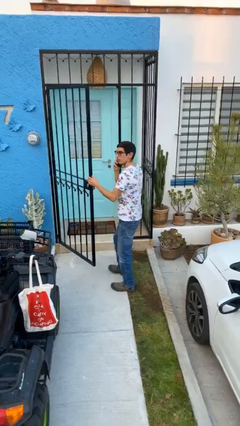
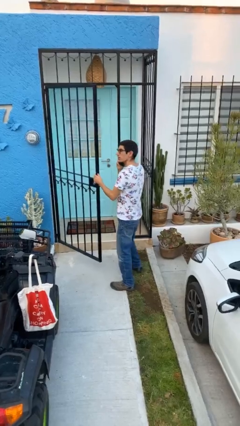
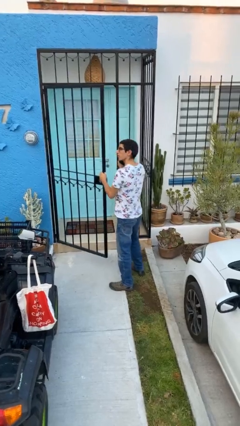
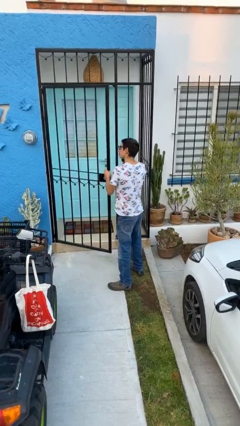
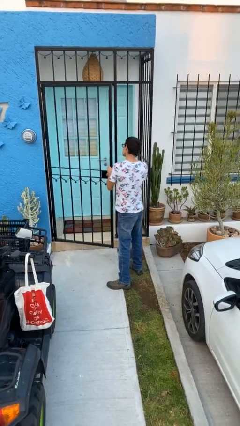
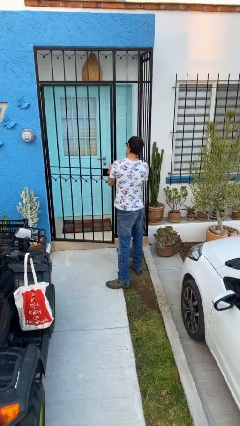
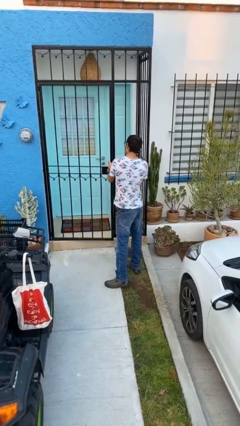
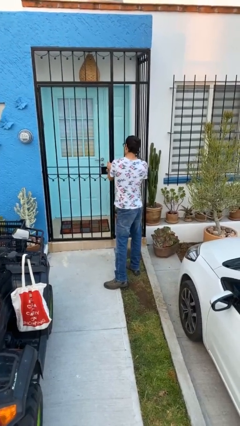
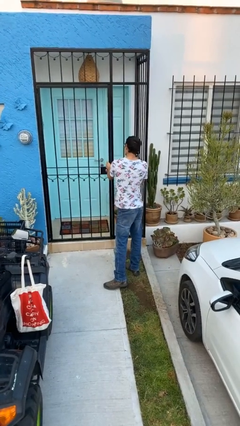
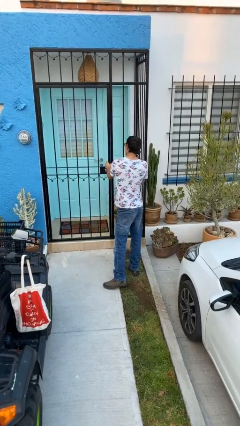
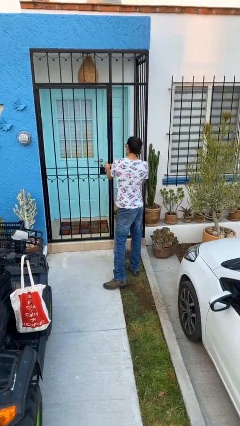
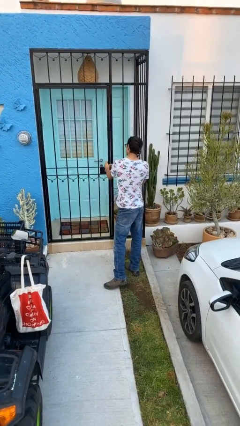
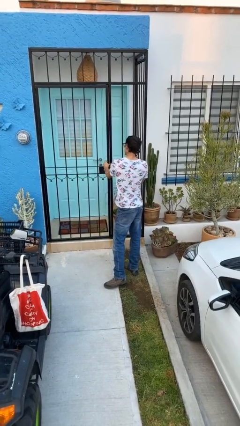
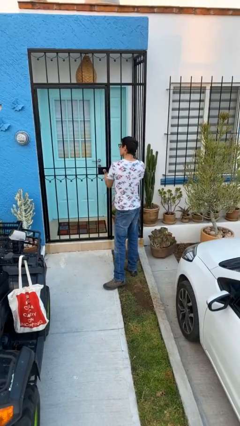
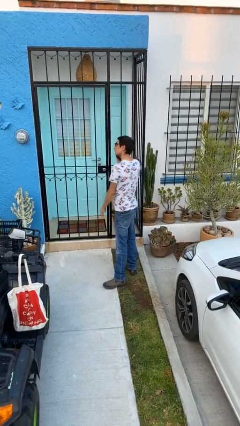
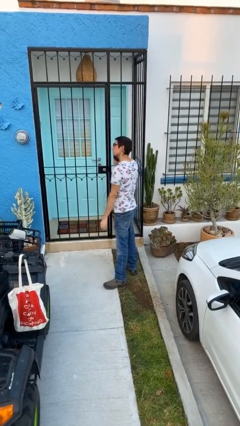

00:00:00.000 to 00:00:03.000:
person closes facility door

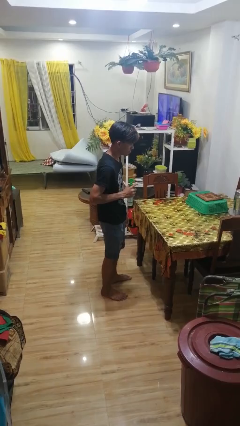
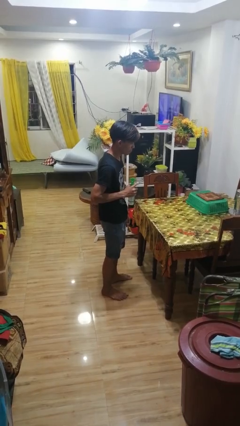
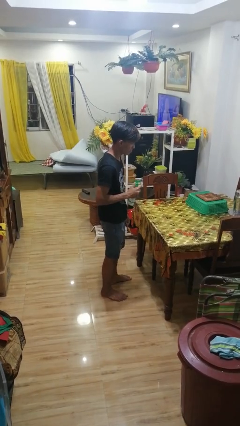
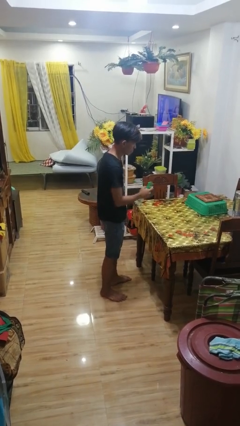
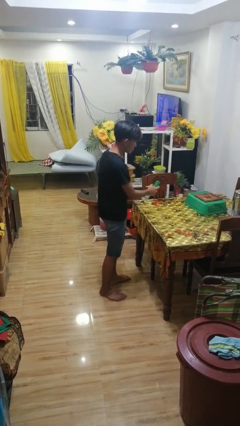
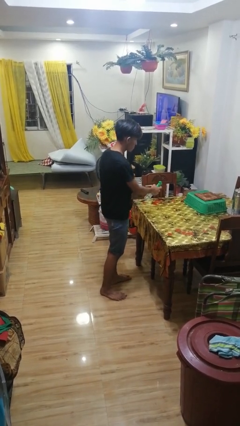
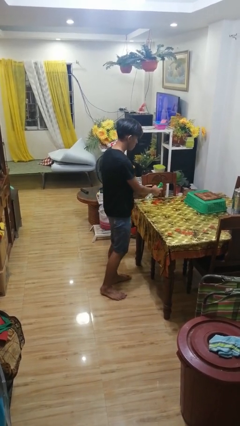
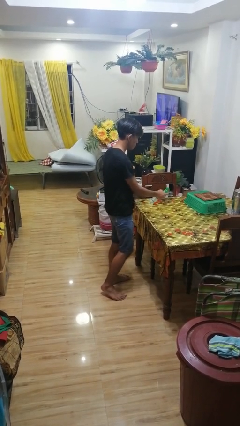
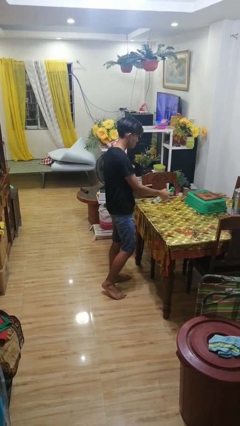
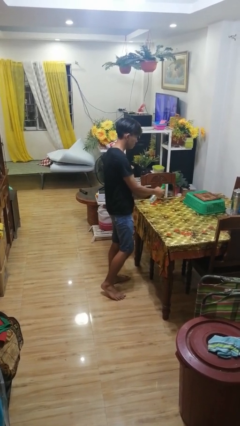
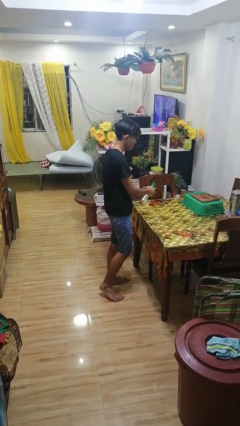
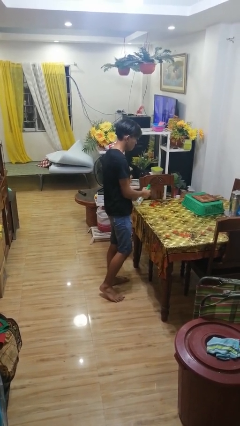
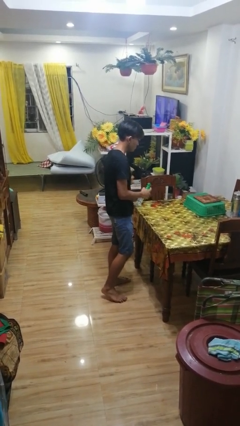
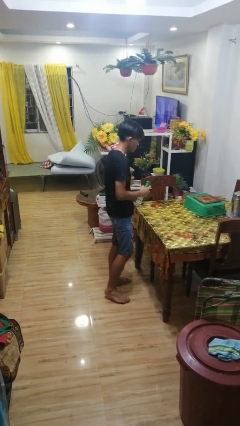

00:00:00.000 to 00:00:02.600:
person sprays from bottle

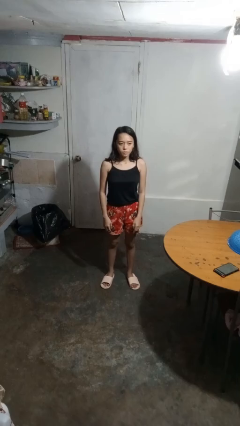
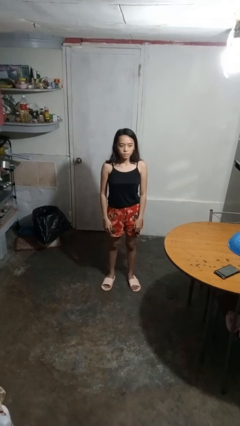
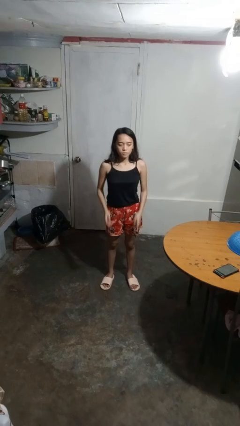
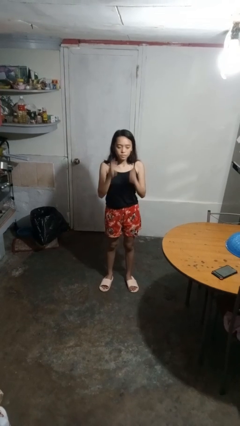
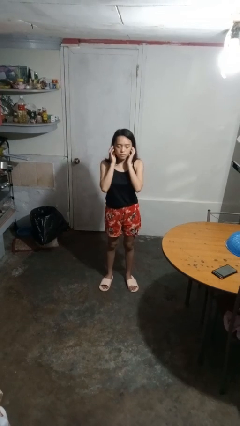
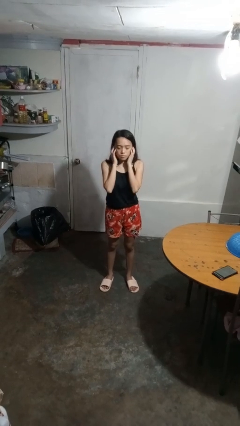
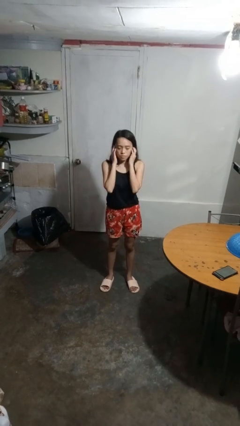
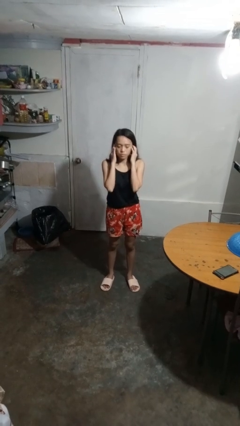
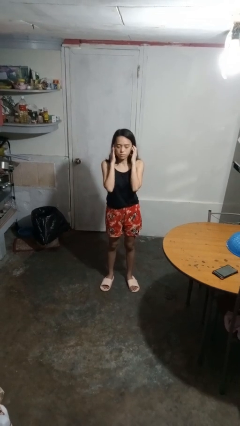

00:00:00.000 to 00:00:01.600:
person puts fingers in ear

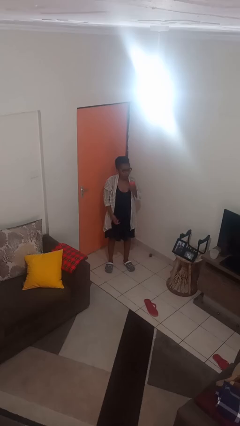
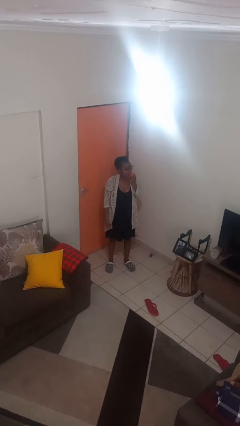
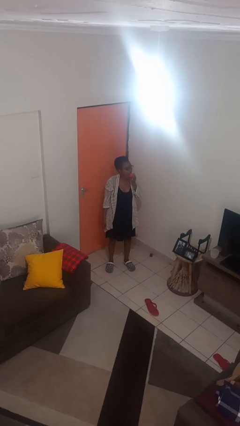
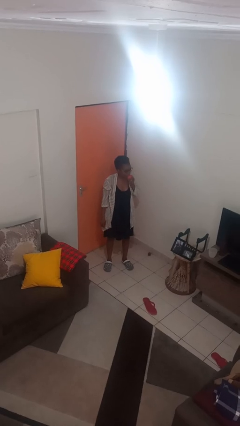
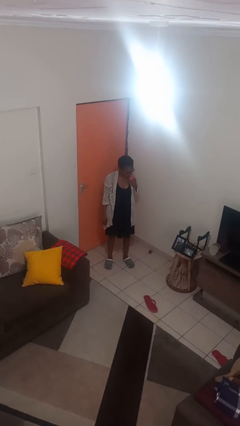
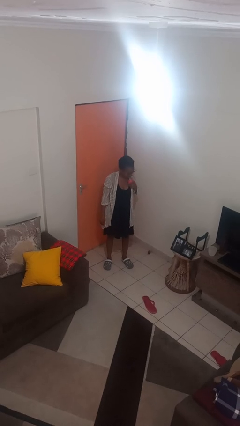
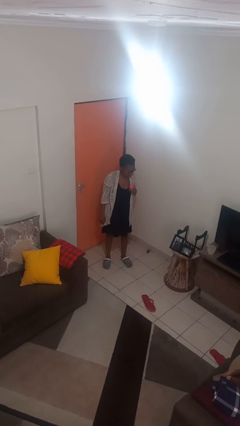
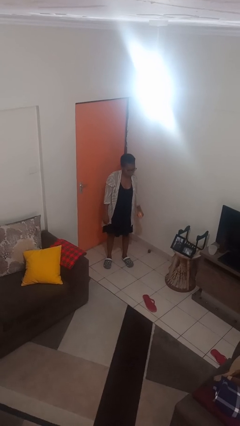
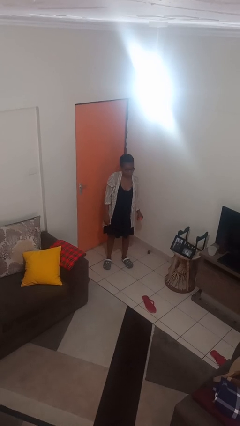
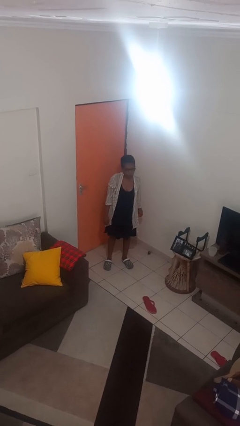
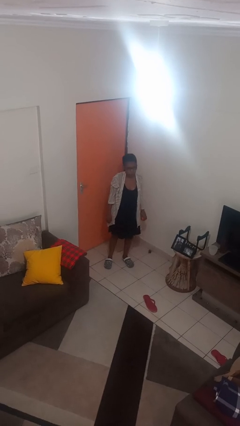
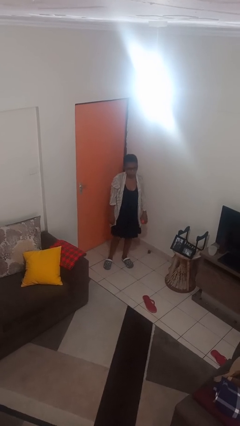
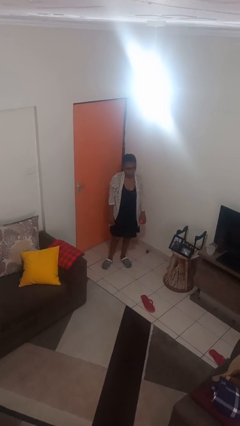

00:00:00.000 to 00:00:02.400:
person eats apple

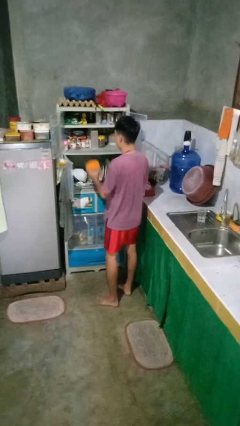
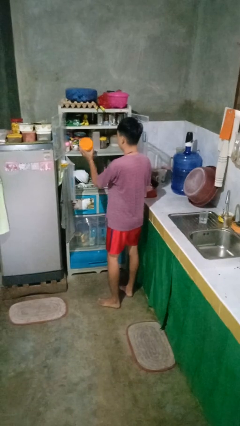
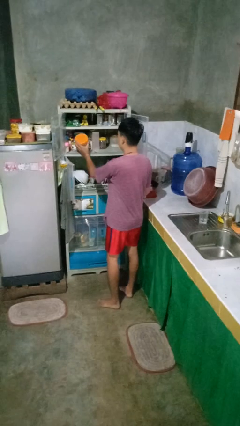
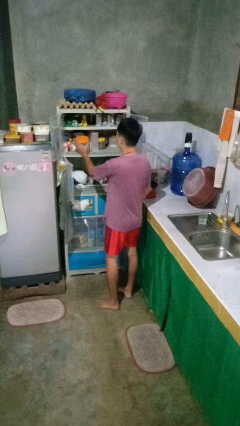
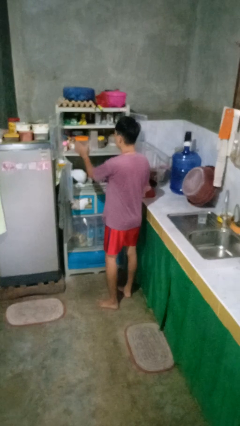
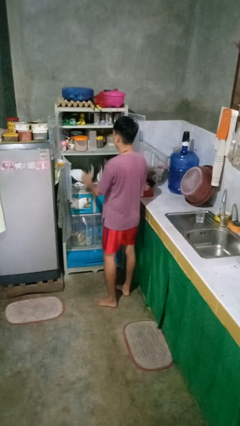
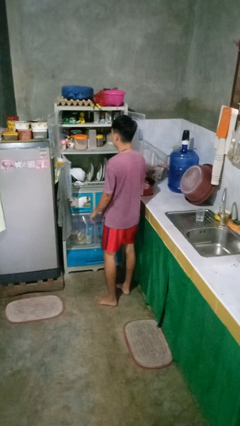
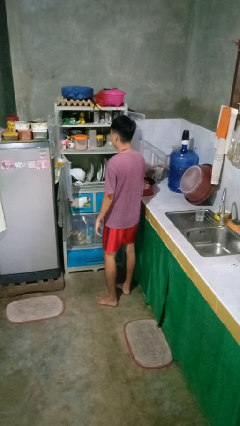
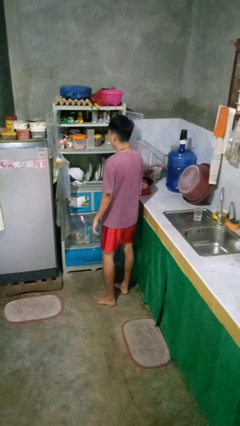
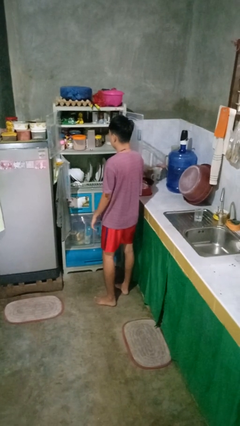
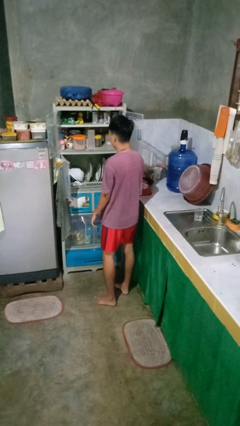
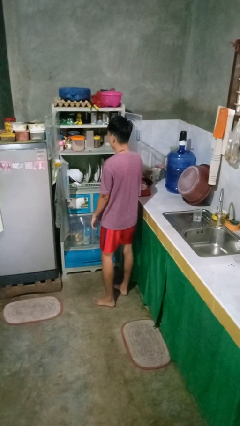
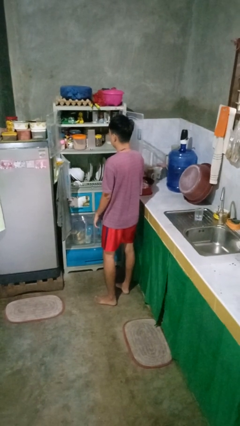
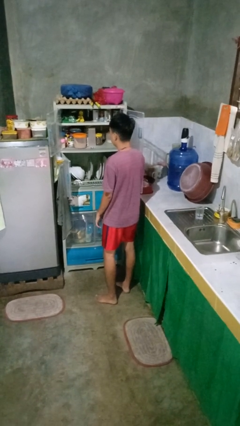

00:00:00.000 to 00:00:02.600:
person puts object in cabinet

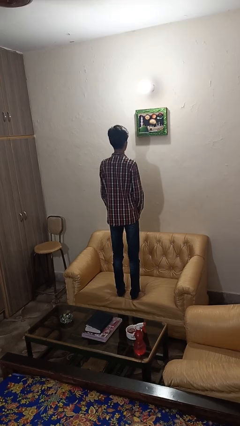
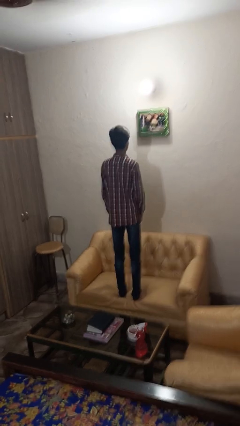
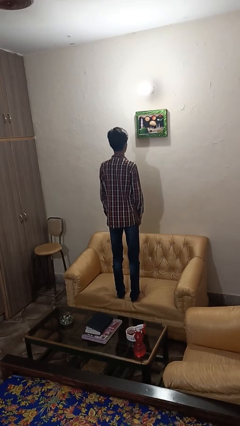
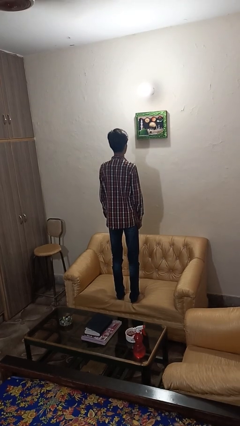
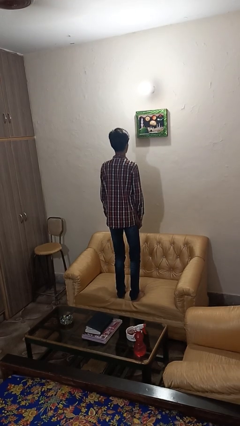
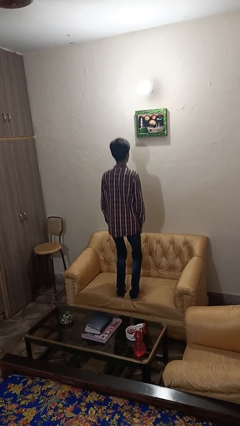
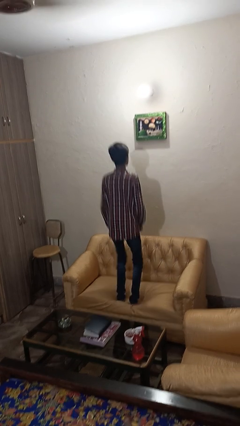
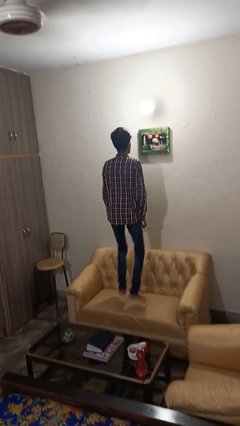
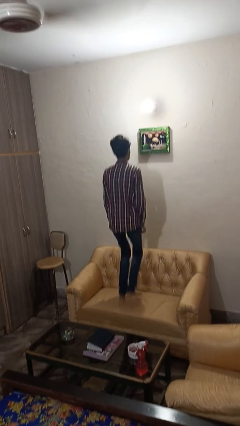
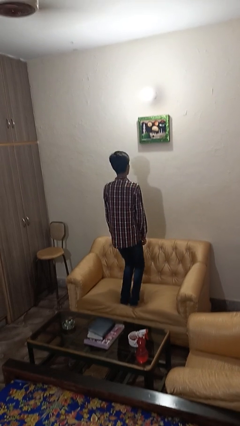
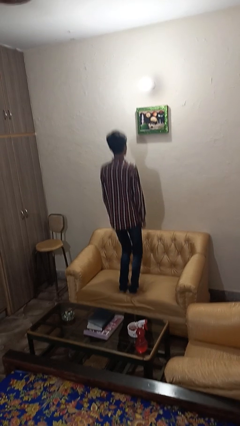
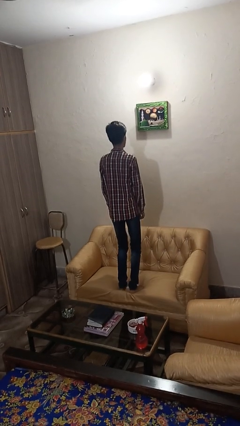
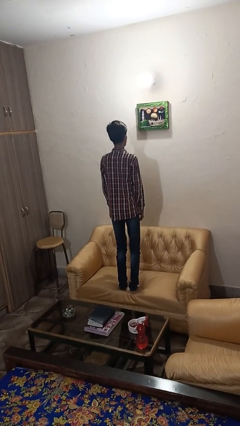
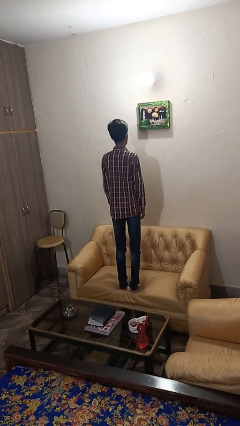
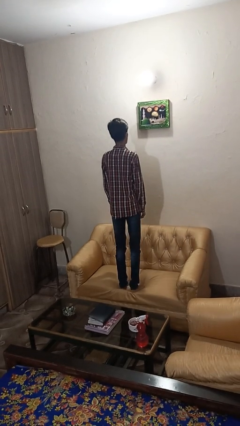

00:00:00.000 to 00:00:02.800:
person jumps on couch

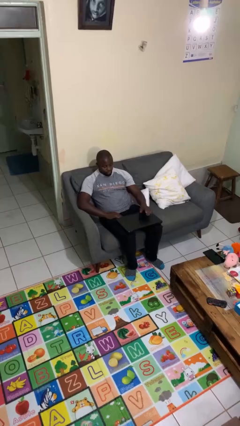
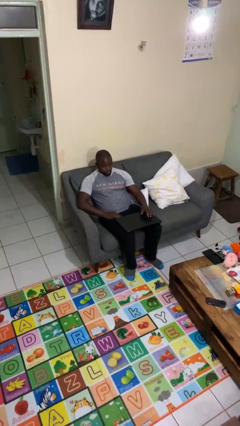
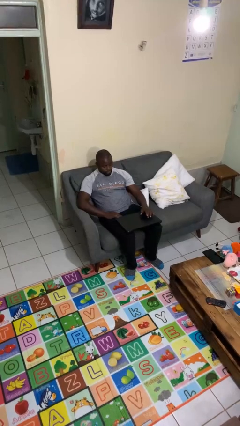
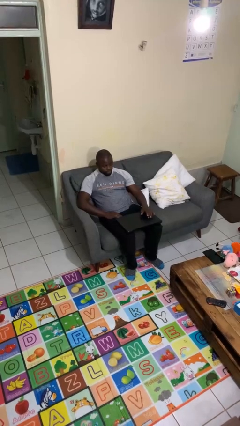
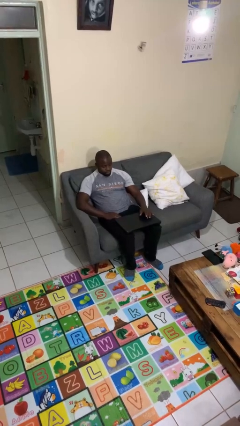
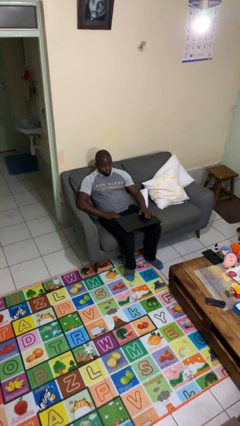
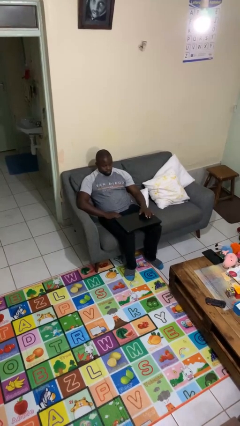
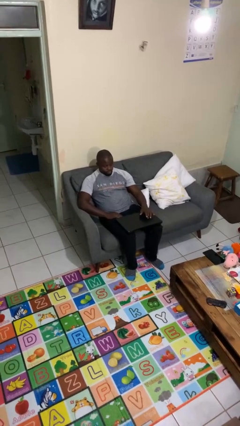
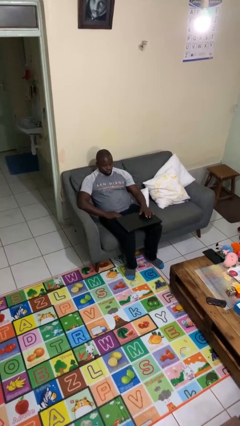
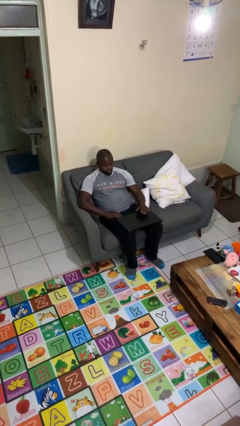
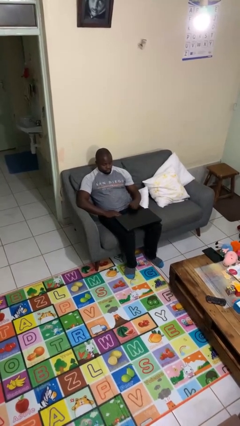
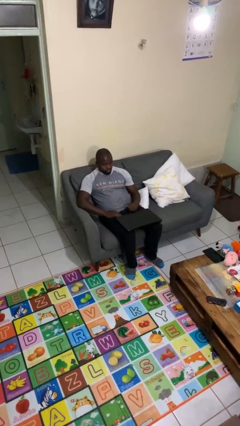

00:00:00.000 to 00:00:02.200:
person taps object with finger
